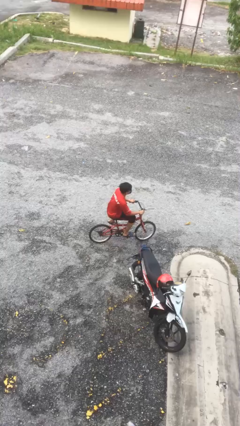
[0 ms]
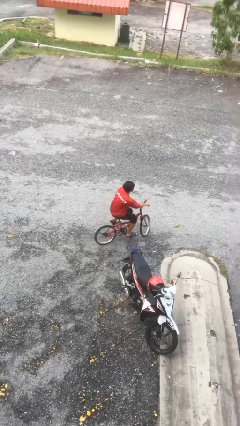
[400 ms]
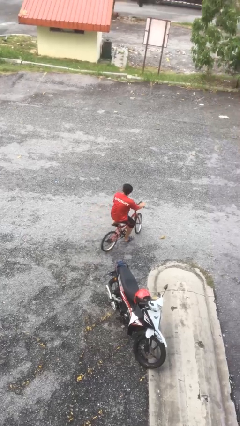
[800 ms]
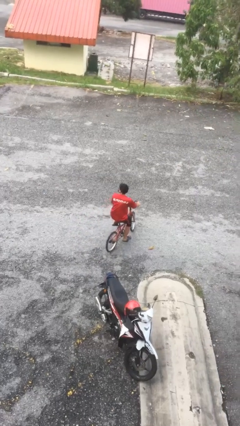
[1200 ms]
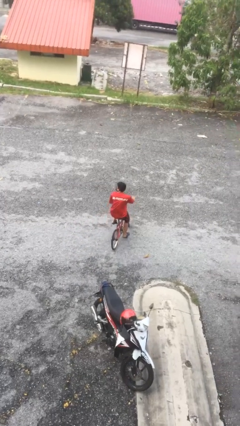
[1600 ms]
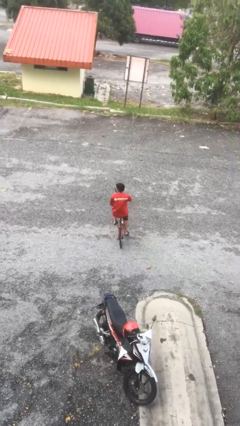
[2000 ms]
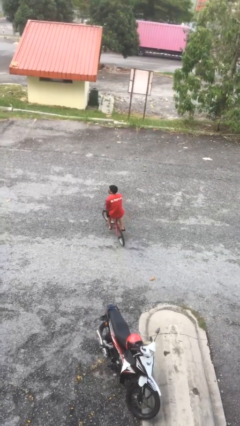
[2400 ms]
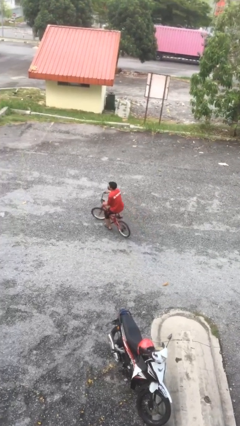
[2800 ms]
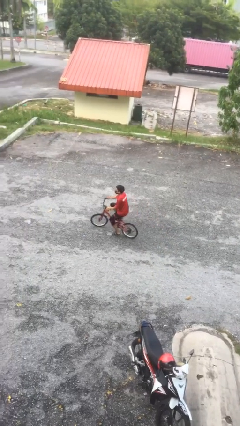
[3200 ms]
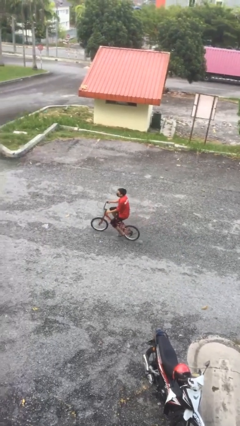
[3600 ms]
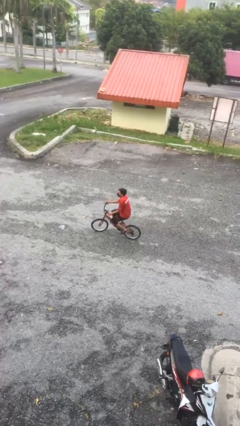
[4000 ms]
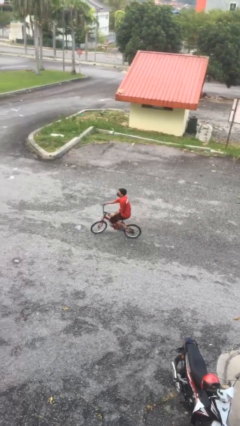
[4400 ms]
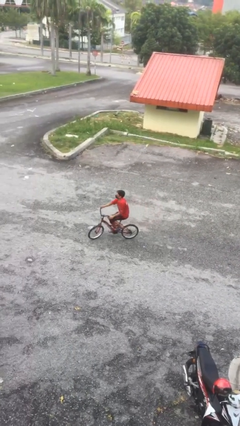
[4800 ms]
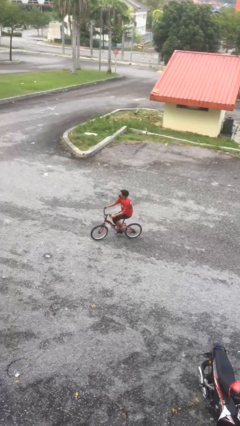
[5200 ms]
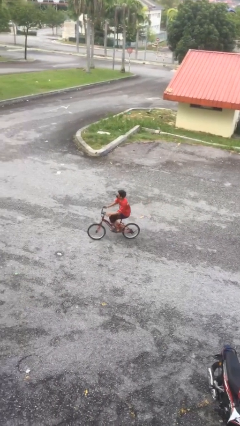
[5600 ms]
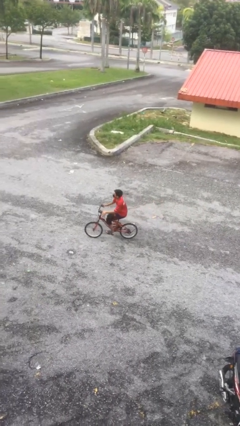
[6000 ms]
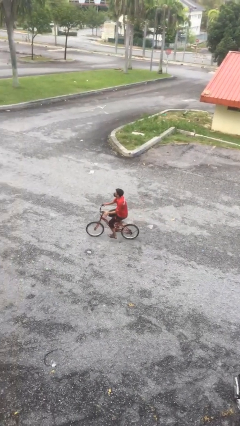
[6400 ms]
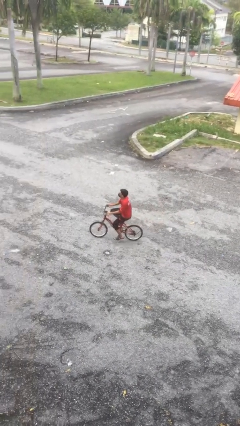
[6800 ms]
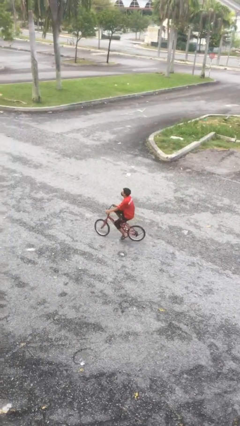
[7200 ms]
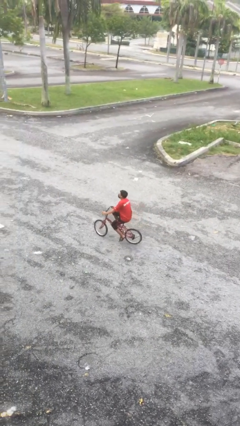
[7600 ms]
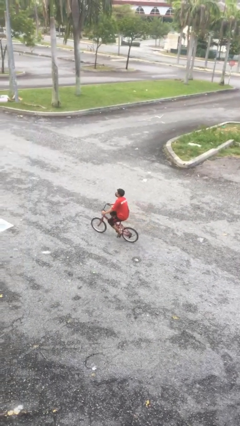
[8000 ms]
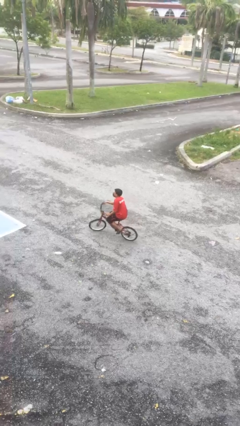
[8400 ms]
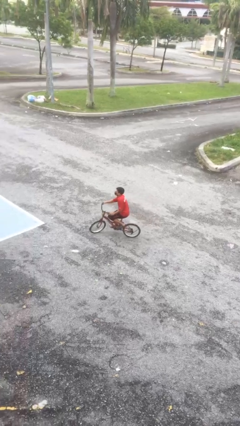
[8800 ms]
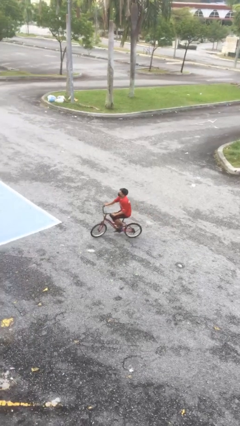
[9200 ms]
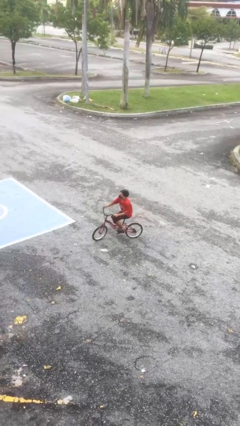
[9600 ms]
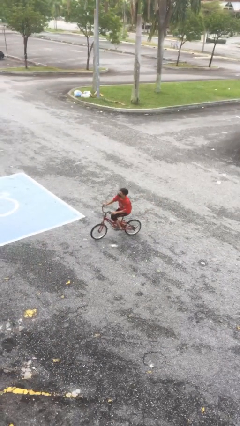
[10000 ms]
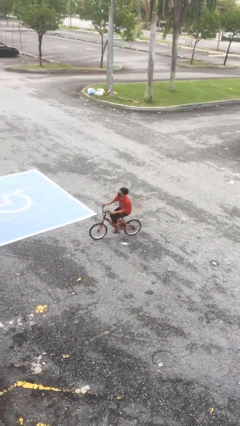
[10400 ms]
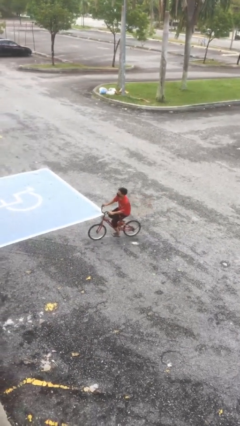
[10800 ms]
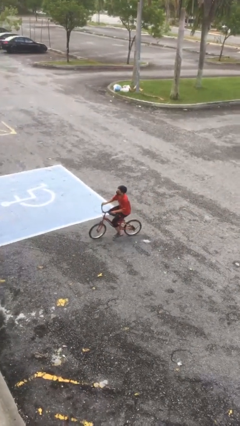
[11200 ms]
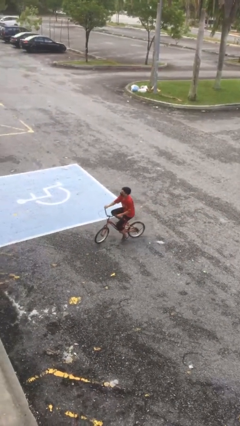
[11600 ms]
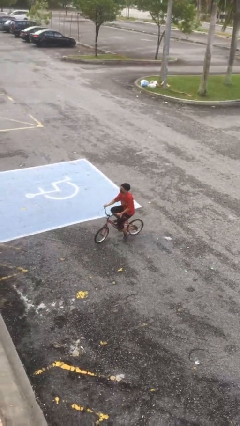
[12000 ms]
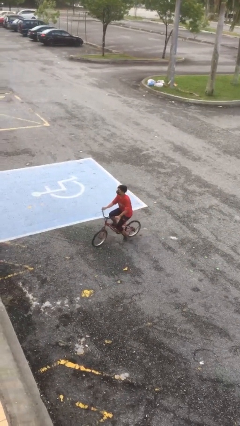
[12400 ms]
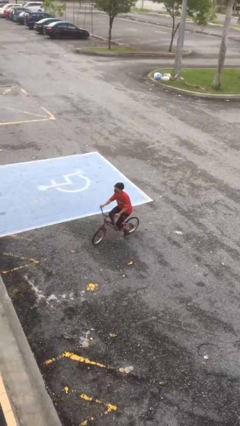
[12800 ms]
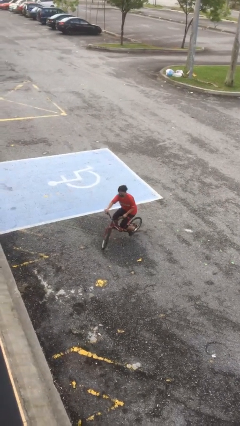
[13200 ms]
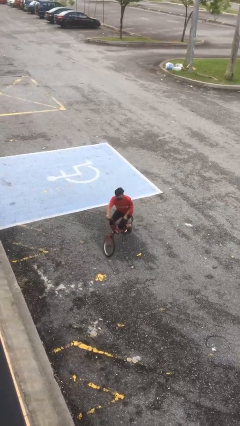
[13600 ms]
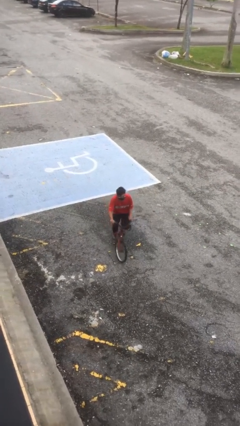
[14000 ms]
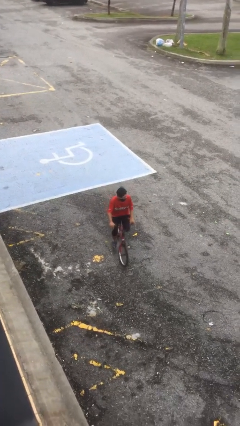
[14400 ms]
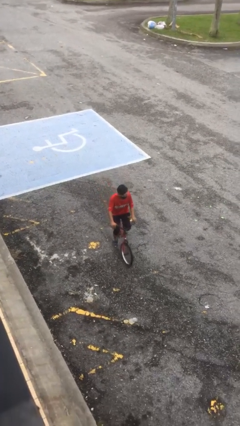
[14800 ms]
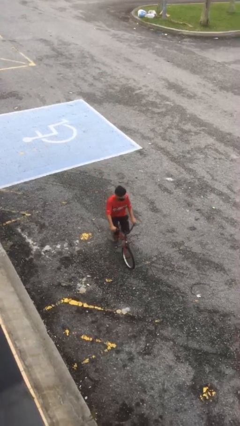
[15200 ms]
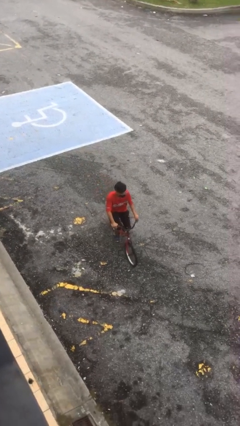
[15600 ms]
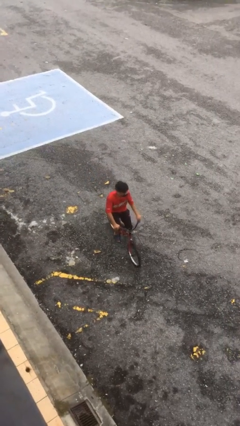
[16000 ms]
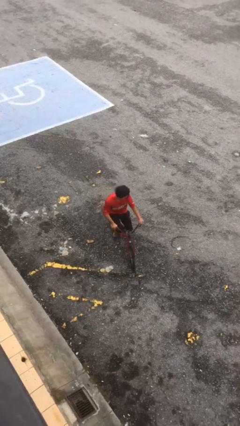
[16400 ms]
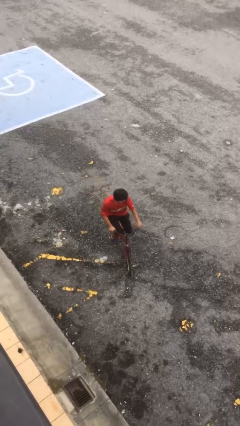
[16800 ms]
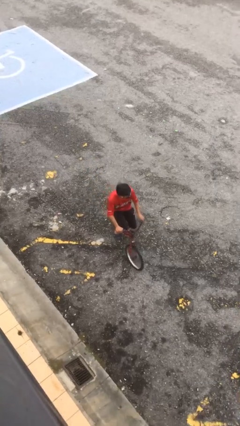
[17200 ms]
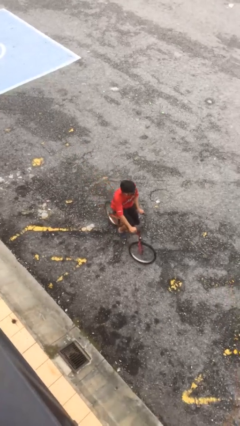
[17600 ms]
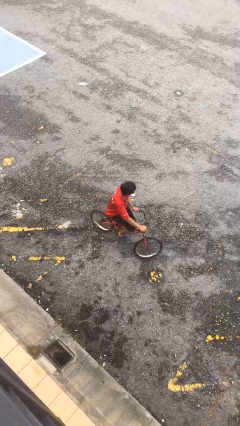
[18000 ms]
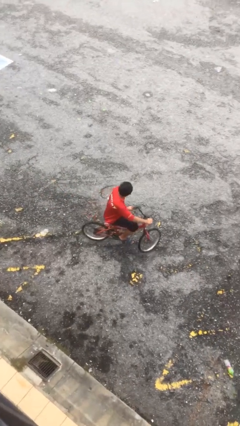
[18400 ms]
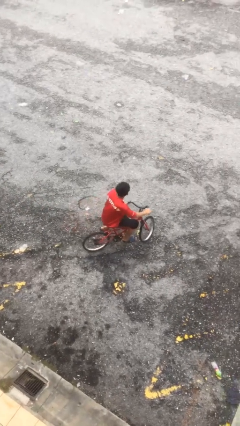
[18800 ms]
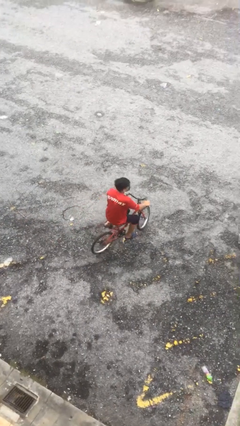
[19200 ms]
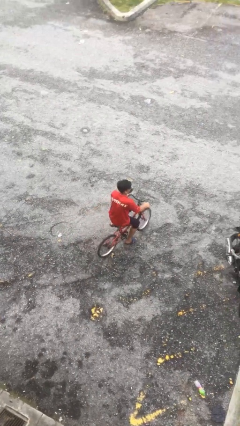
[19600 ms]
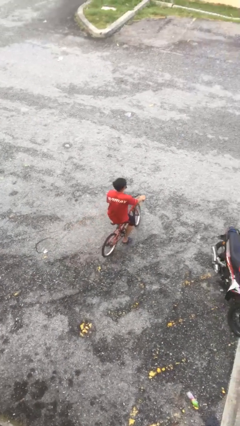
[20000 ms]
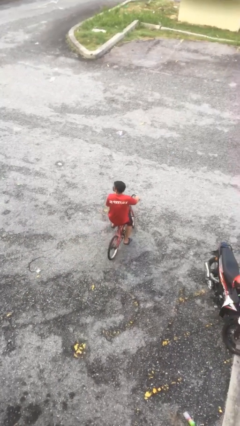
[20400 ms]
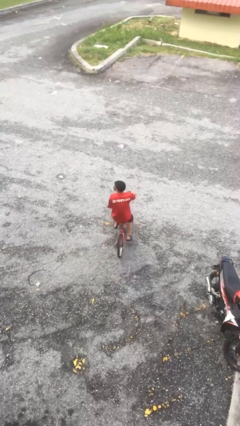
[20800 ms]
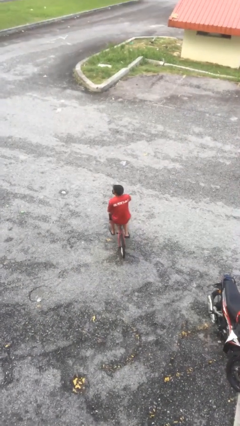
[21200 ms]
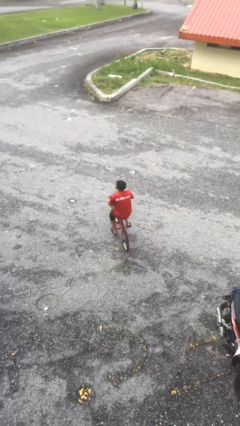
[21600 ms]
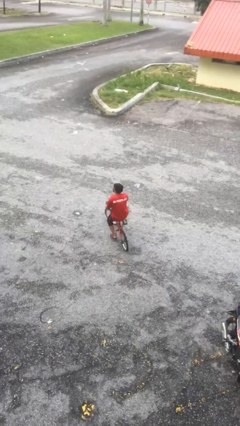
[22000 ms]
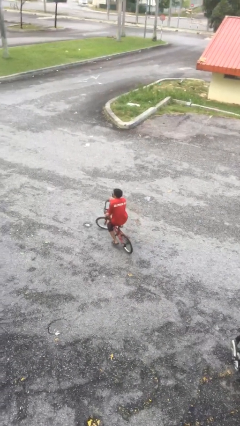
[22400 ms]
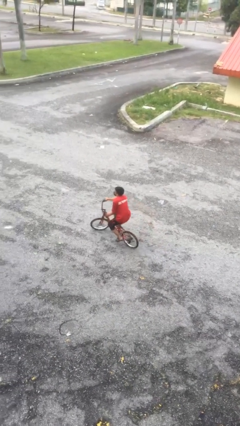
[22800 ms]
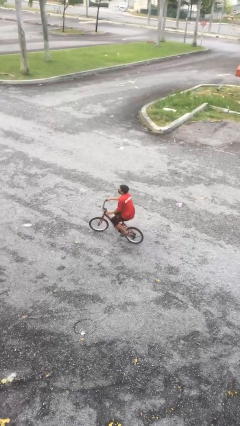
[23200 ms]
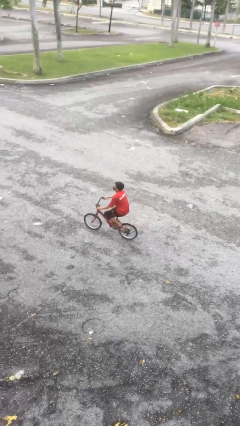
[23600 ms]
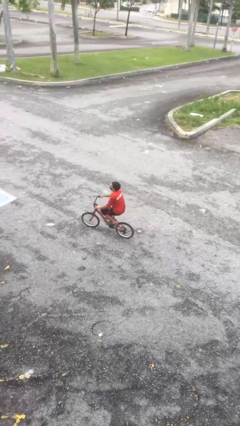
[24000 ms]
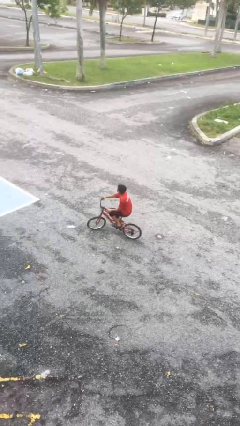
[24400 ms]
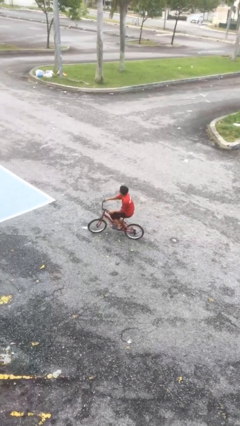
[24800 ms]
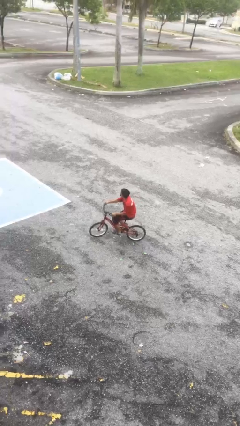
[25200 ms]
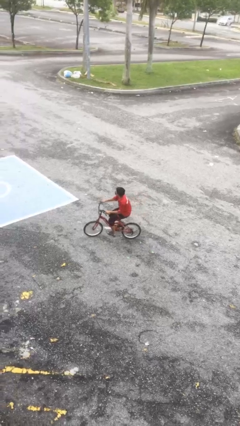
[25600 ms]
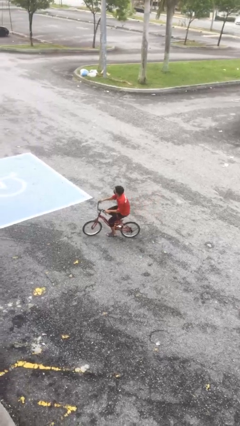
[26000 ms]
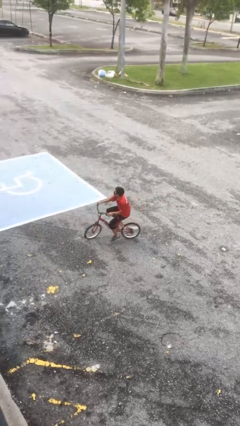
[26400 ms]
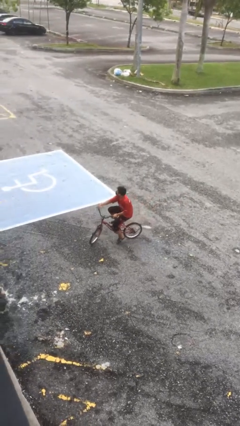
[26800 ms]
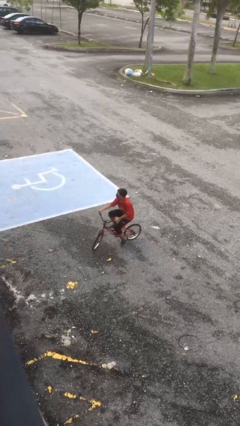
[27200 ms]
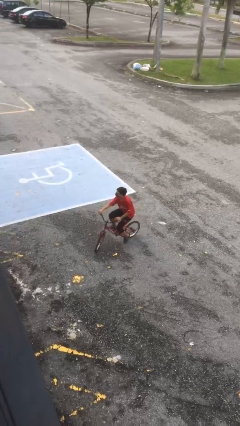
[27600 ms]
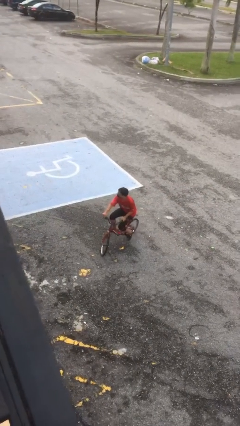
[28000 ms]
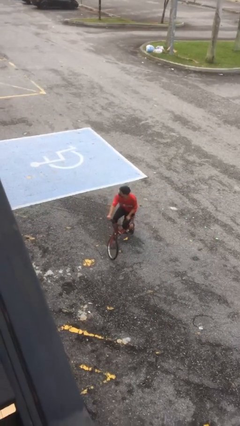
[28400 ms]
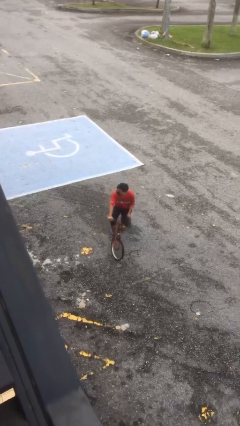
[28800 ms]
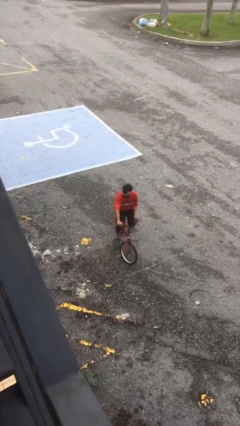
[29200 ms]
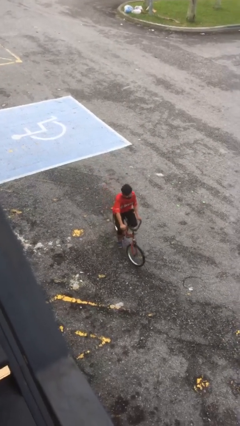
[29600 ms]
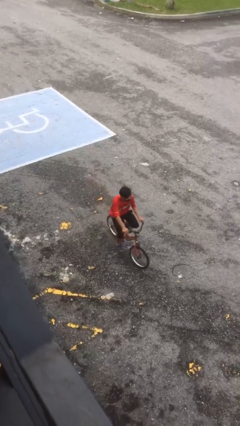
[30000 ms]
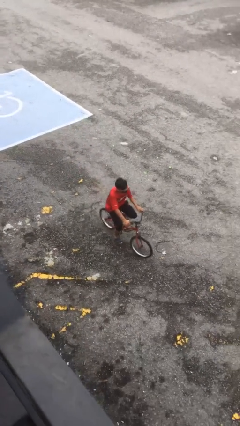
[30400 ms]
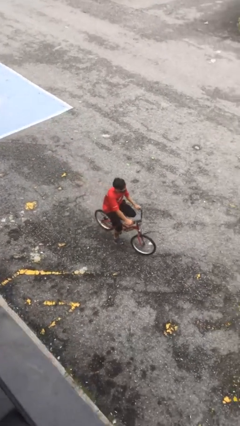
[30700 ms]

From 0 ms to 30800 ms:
person rides bicycle

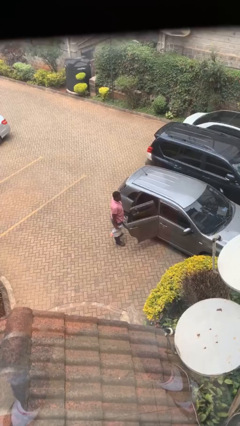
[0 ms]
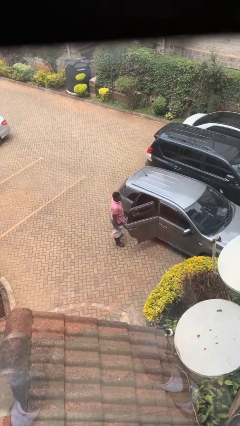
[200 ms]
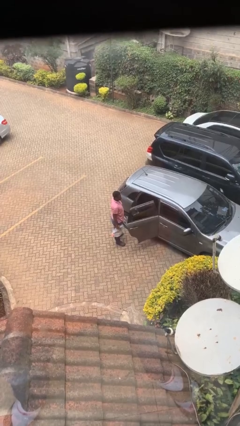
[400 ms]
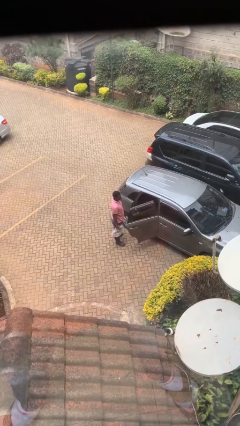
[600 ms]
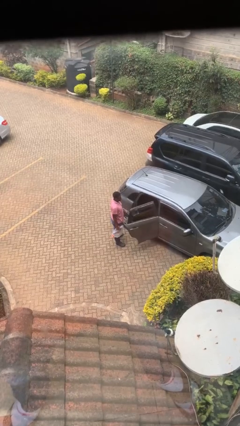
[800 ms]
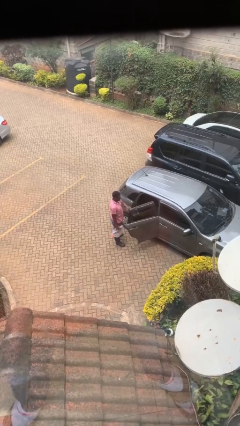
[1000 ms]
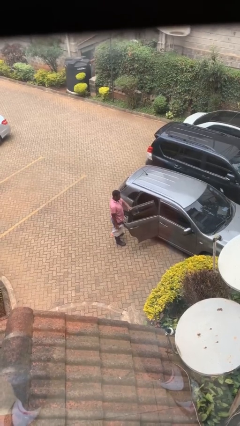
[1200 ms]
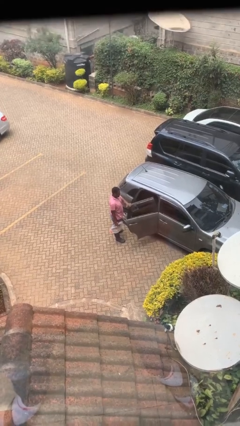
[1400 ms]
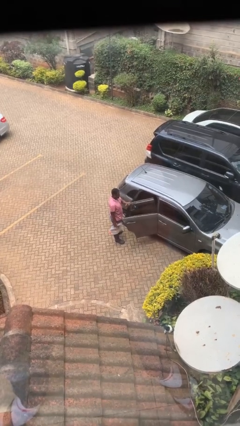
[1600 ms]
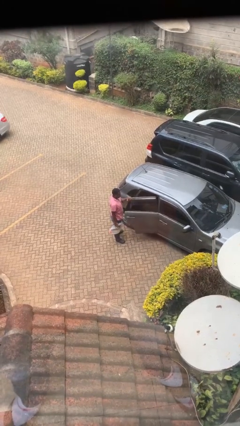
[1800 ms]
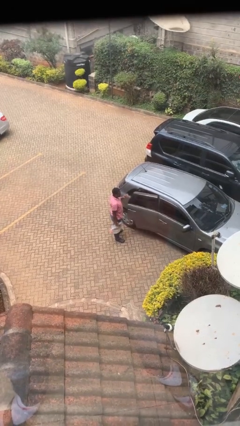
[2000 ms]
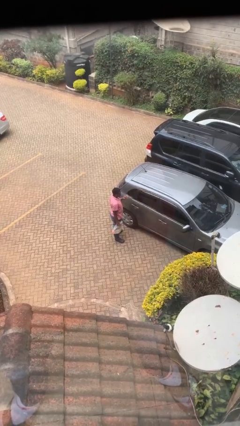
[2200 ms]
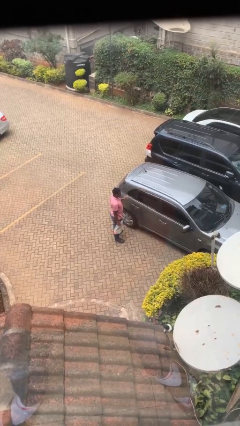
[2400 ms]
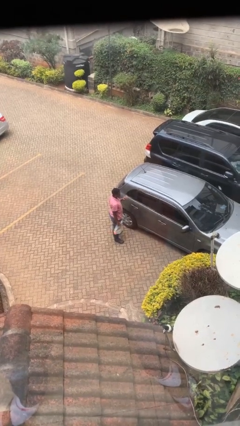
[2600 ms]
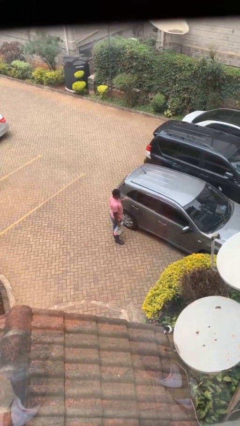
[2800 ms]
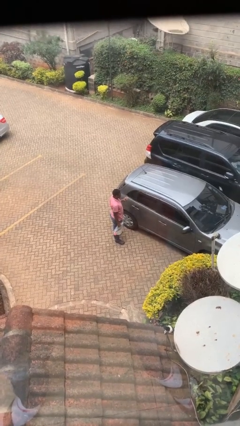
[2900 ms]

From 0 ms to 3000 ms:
person closes car door
